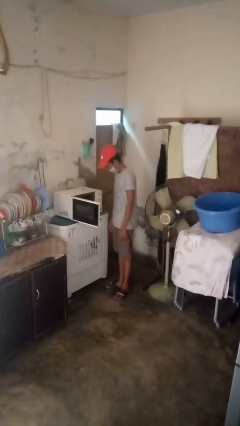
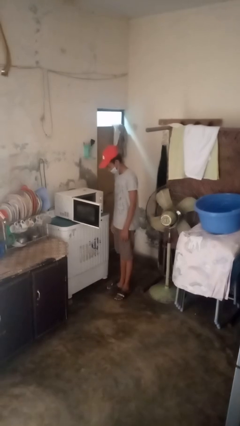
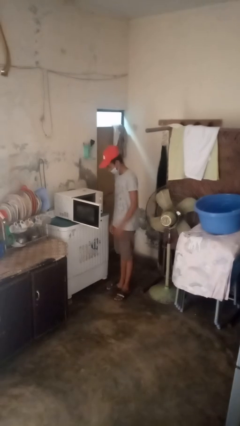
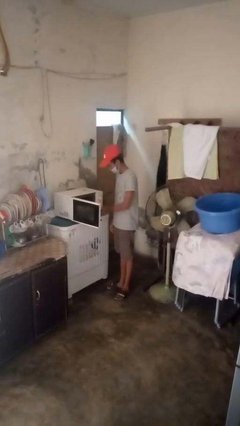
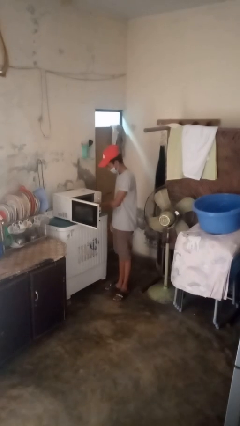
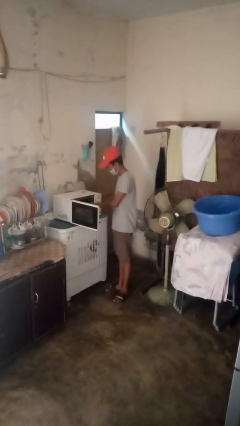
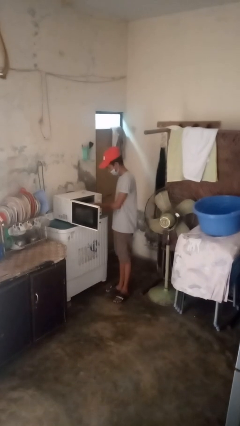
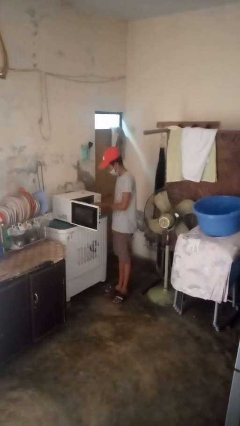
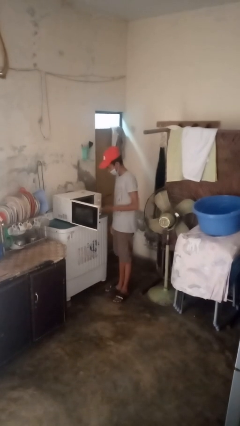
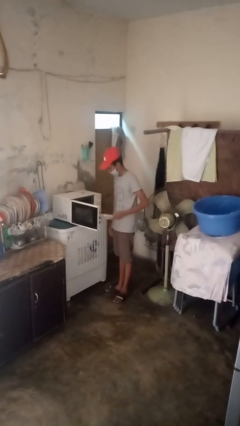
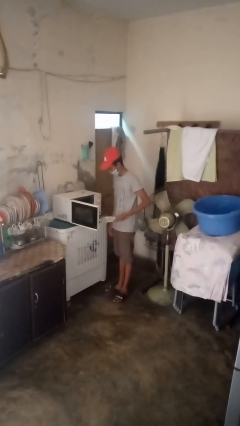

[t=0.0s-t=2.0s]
person takes object from microwave

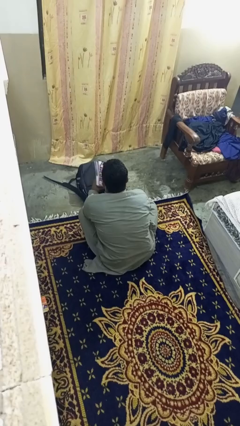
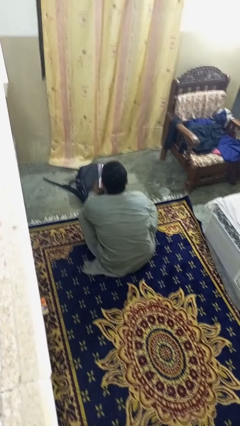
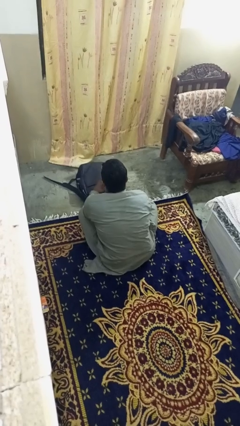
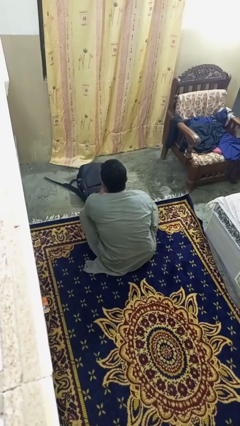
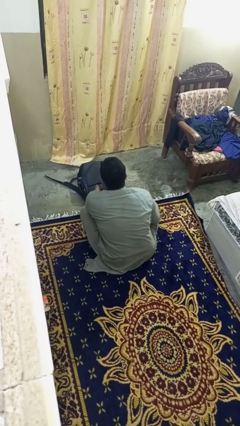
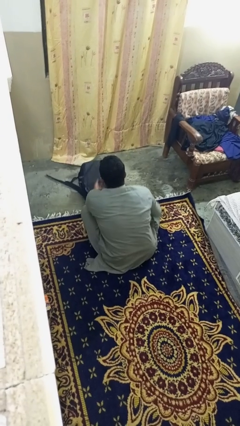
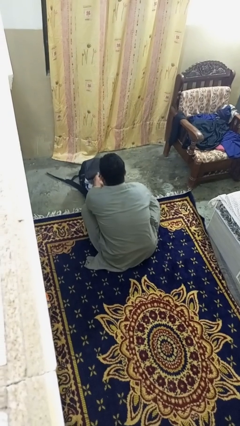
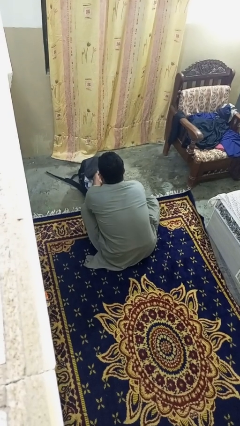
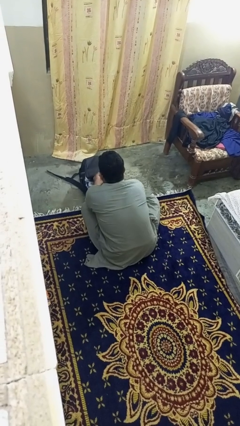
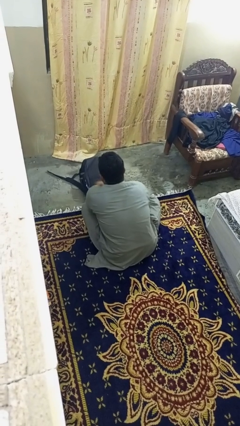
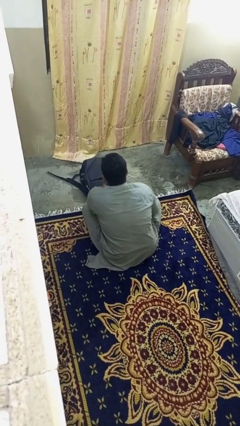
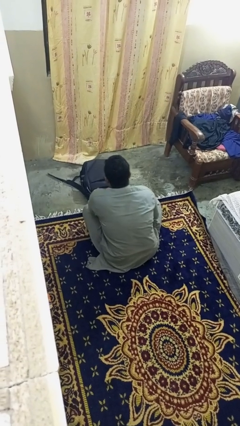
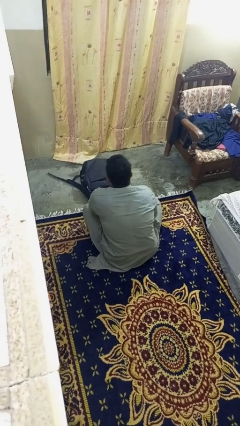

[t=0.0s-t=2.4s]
person puts object into bag

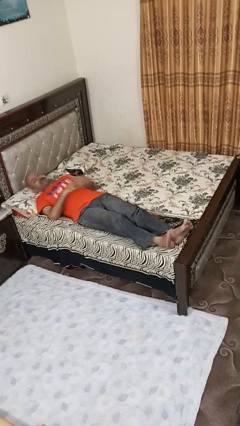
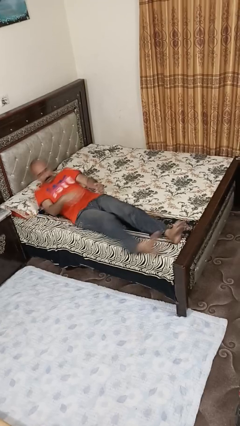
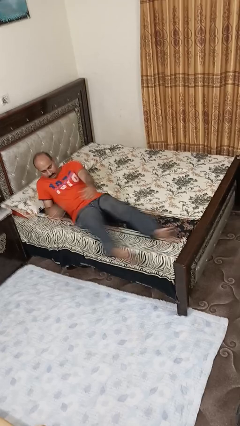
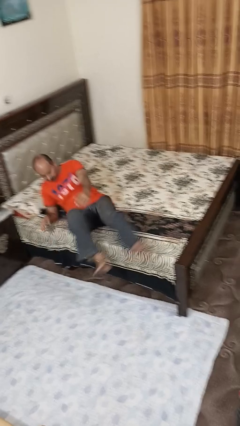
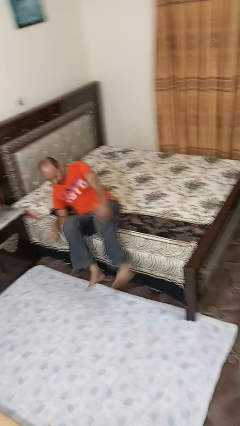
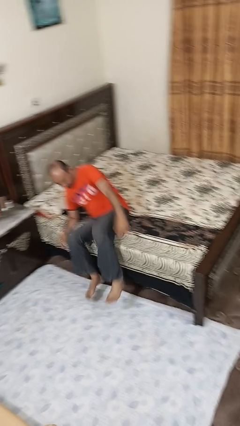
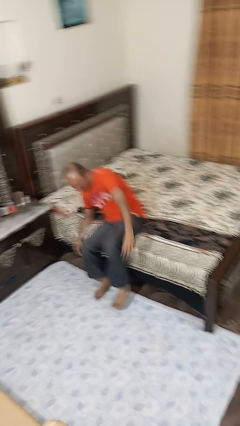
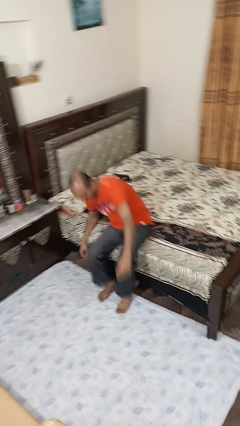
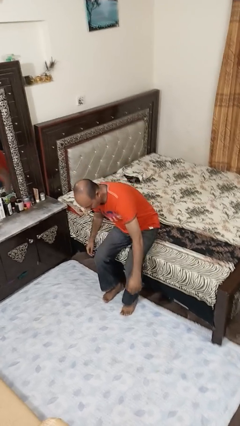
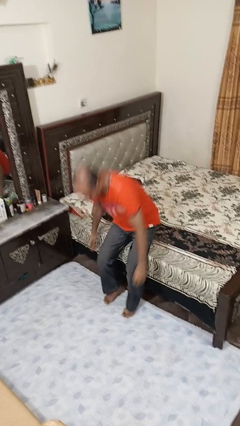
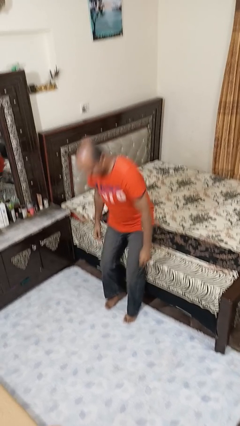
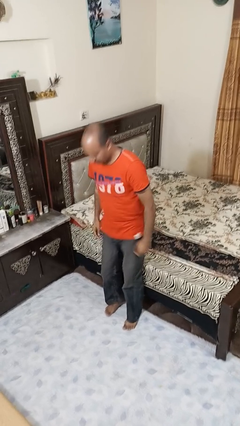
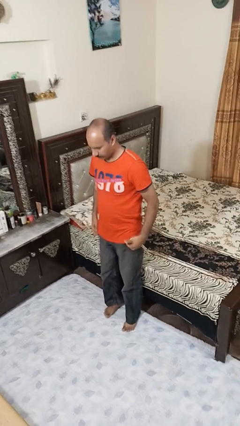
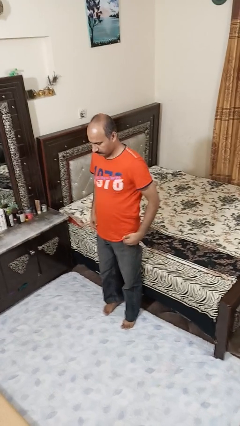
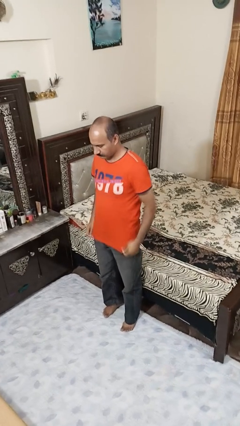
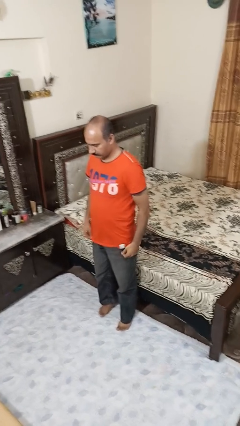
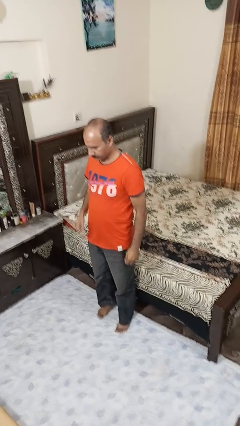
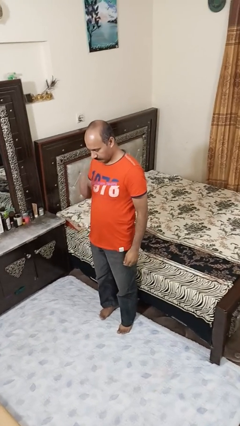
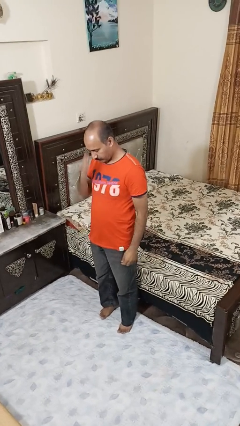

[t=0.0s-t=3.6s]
person stands up

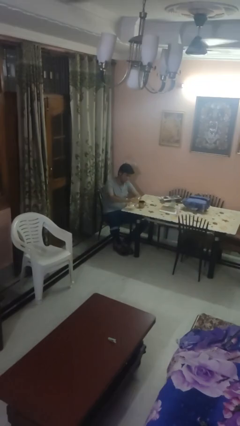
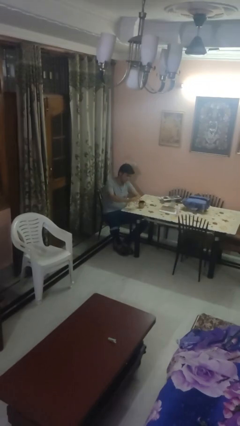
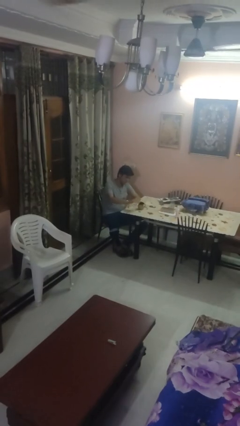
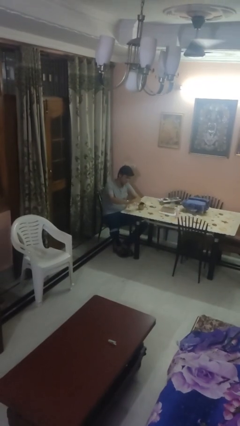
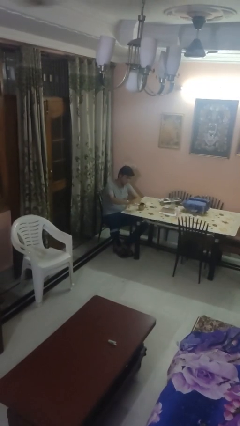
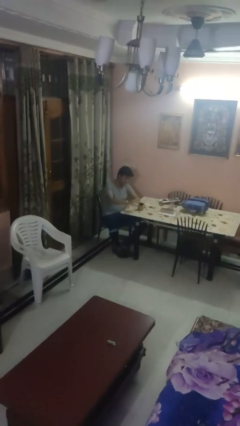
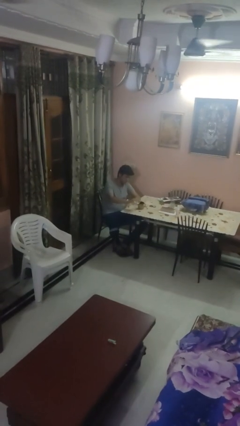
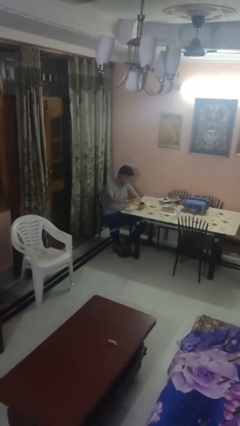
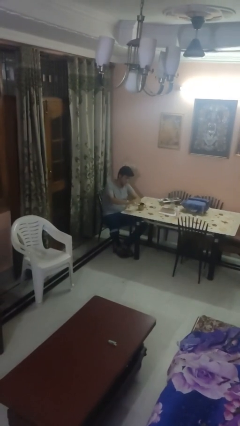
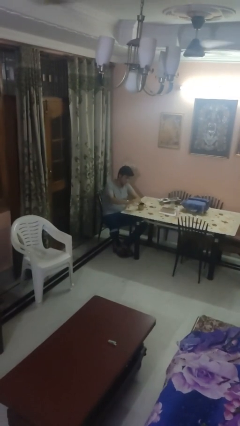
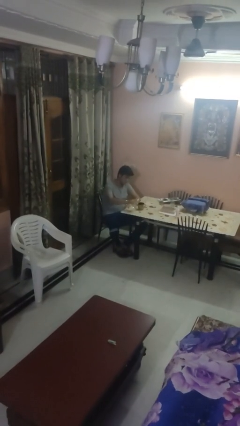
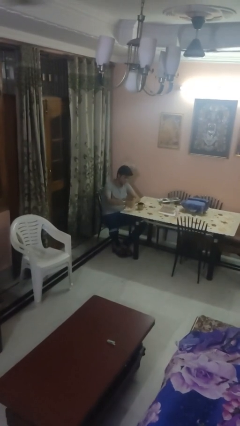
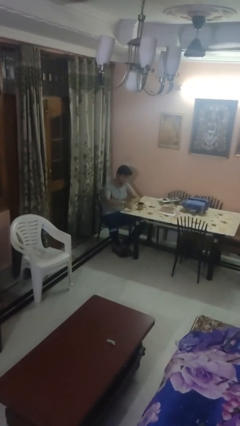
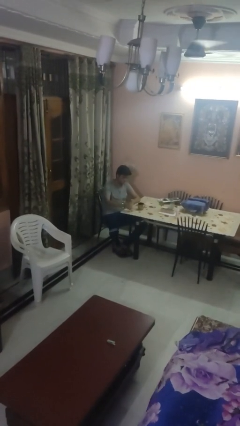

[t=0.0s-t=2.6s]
person pours liquid into cup

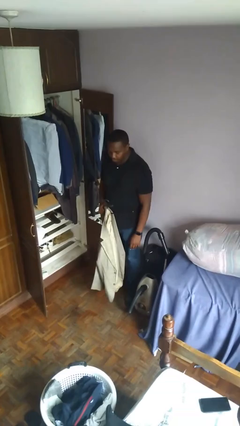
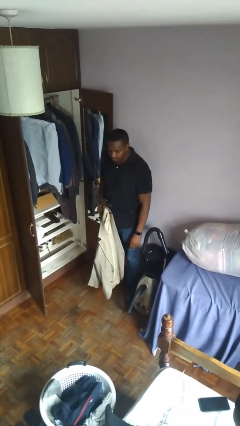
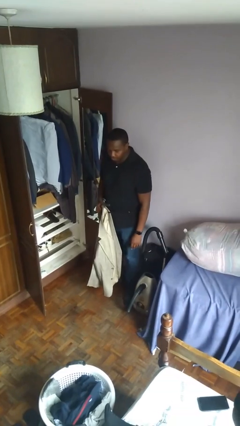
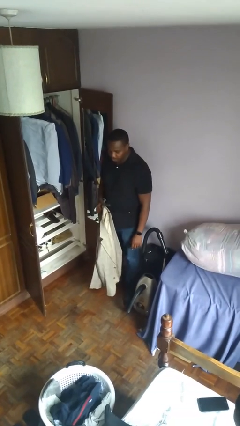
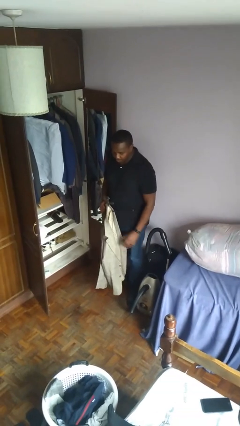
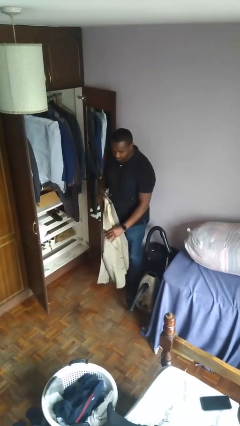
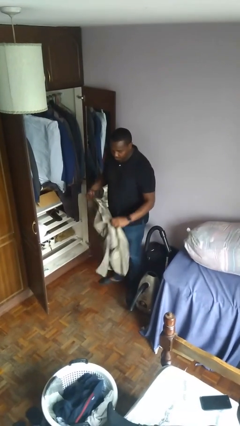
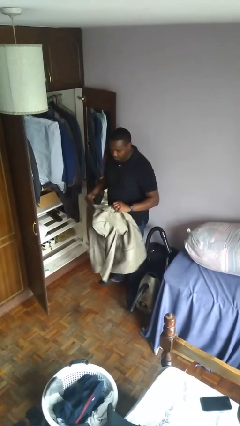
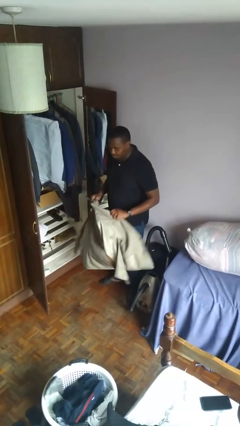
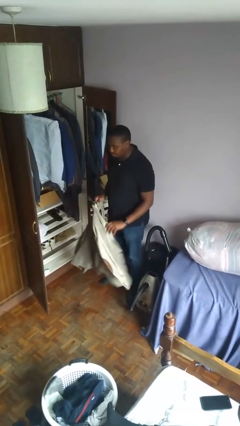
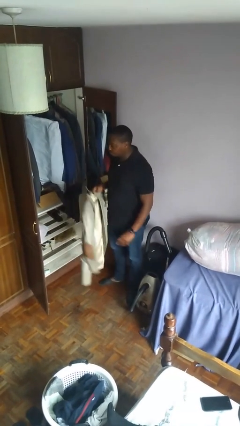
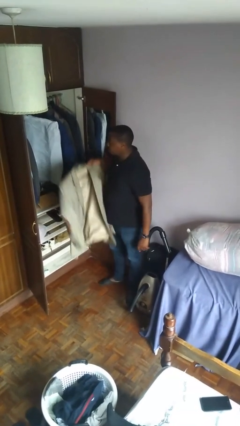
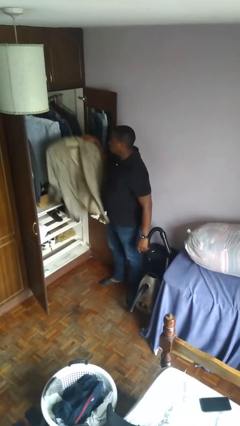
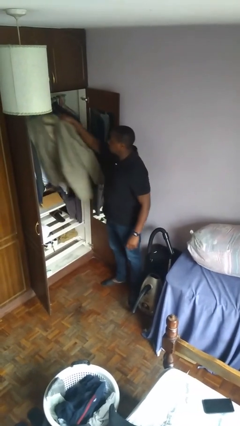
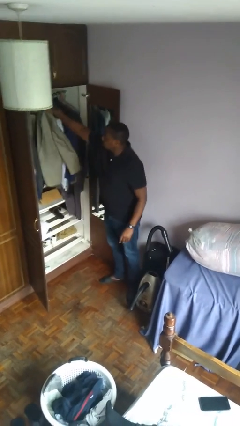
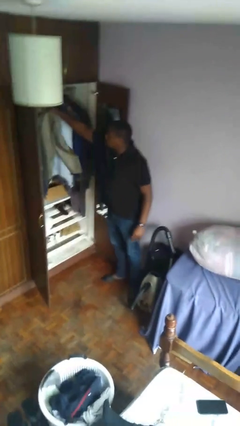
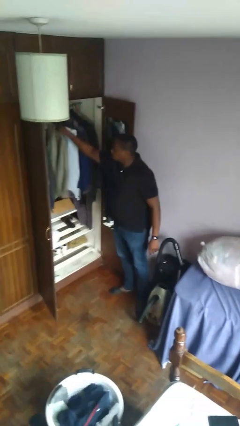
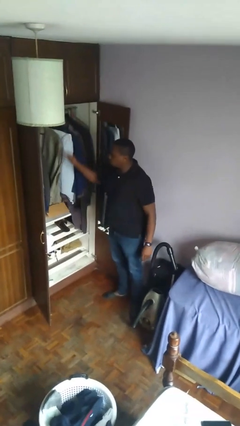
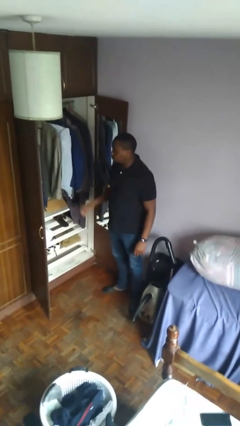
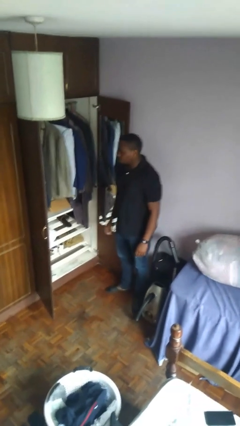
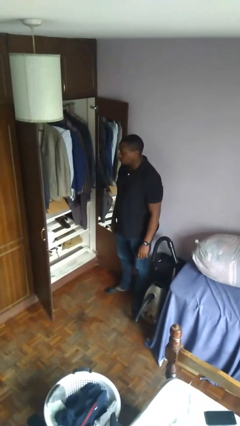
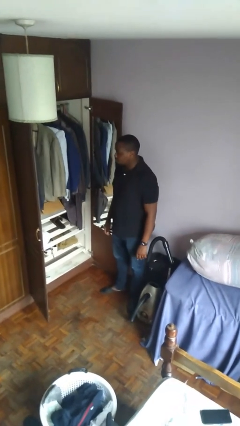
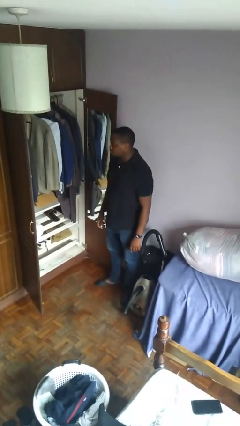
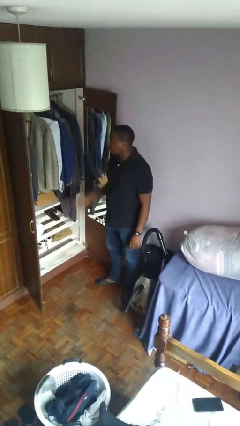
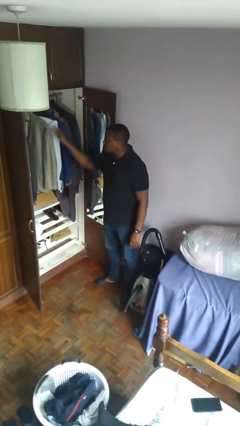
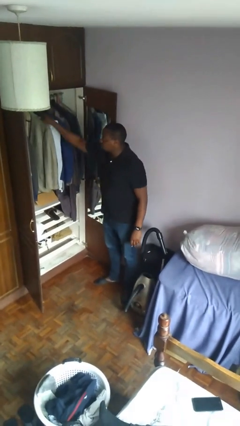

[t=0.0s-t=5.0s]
person puts clothes into closet

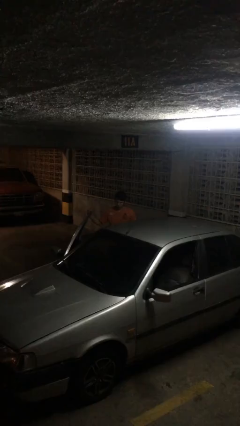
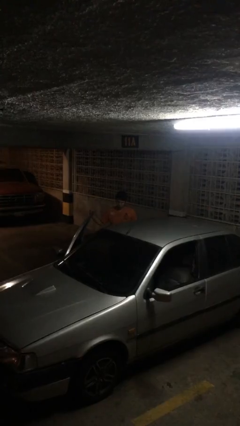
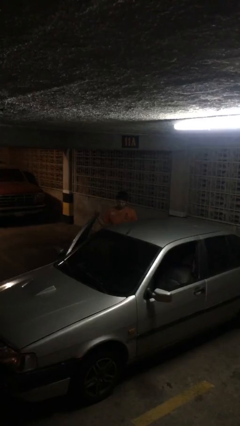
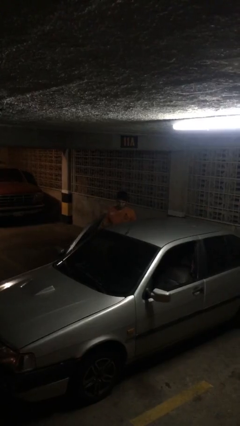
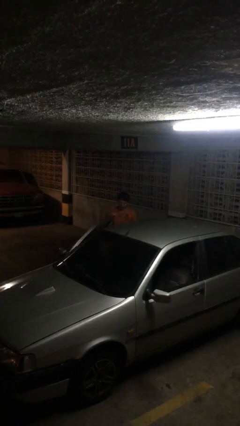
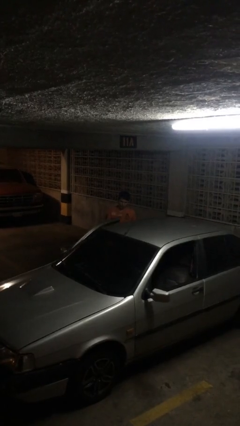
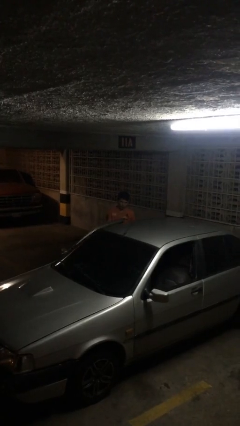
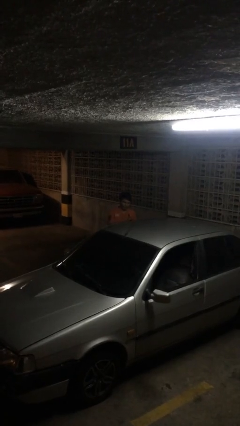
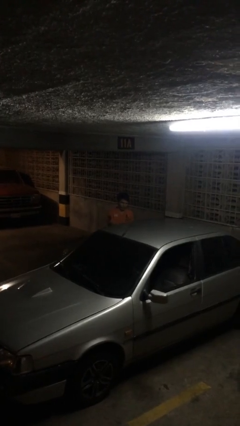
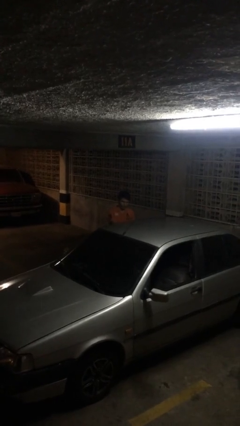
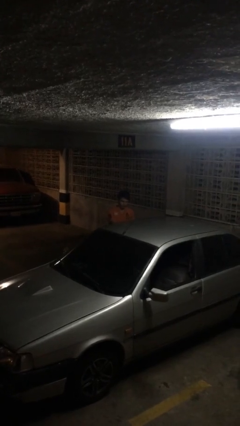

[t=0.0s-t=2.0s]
person closes car door
